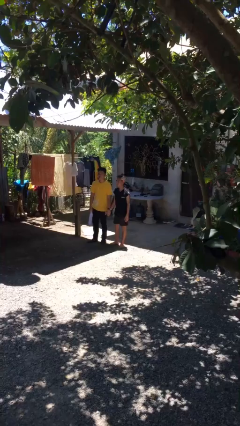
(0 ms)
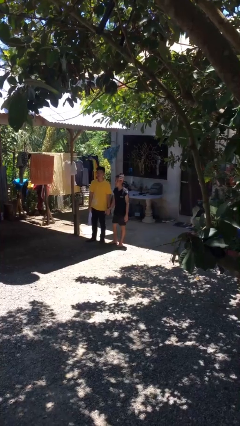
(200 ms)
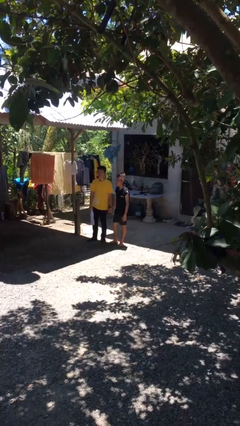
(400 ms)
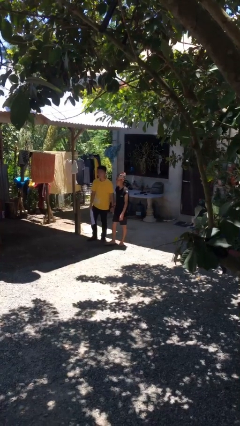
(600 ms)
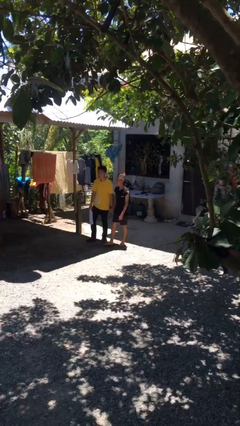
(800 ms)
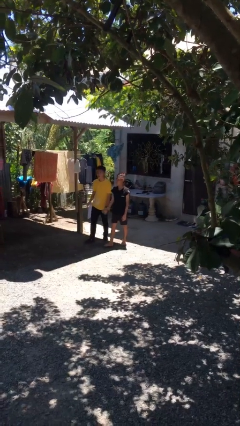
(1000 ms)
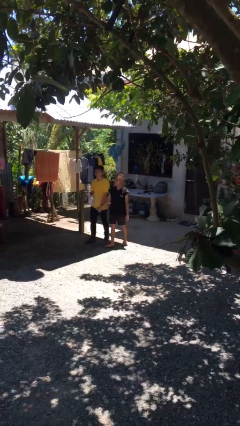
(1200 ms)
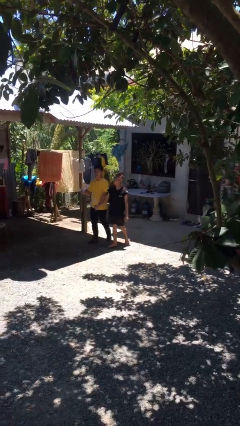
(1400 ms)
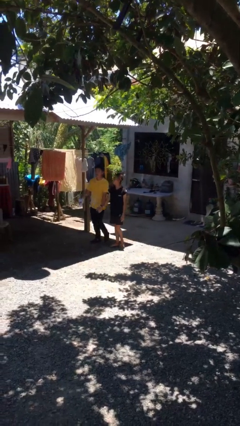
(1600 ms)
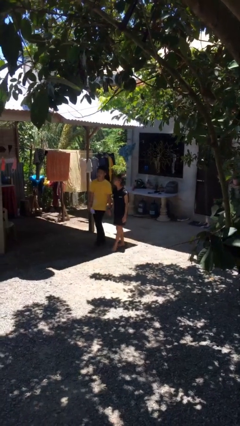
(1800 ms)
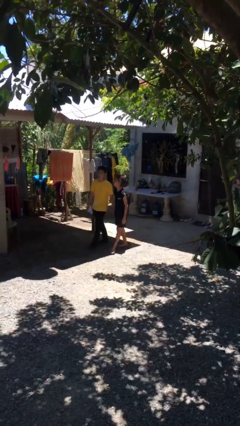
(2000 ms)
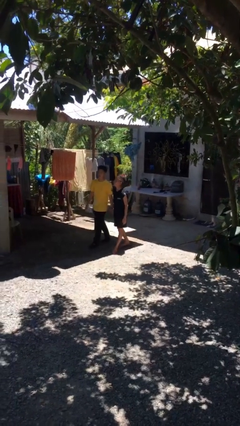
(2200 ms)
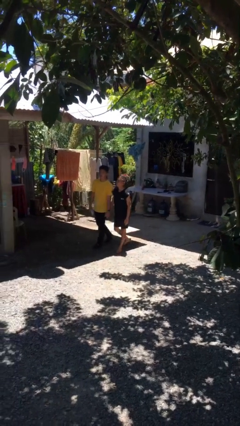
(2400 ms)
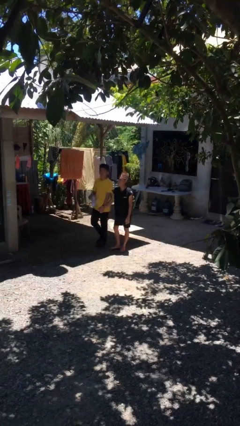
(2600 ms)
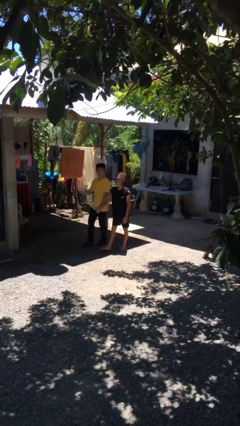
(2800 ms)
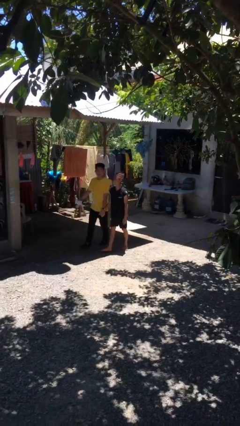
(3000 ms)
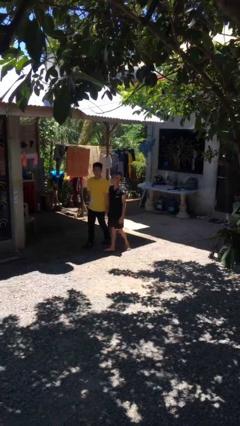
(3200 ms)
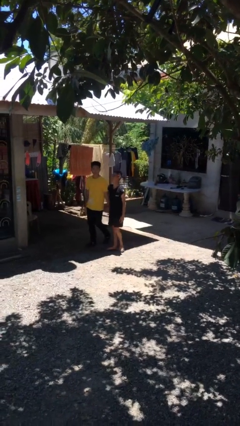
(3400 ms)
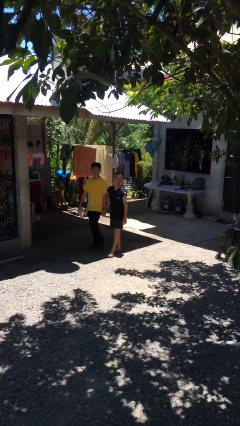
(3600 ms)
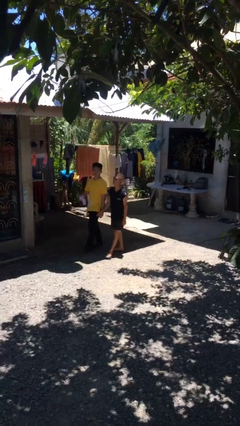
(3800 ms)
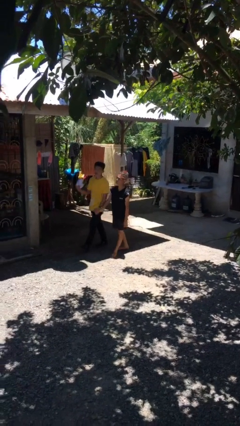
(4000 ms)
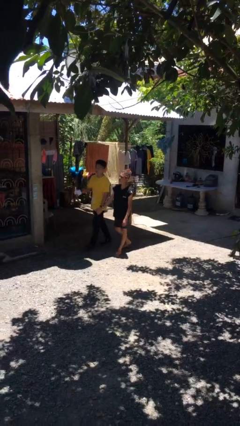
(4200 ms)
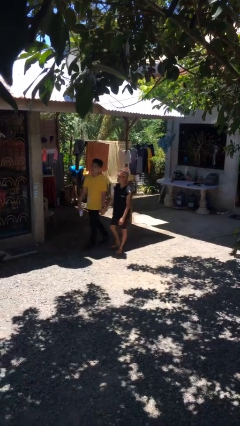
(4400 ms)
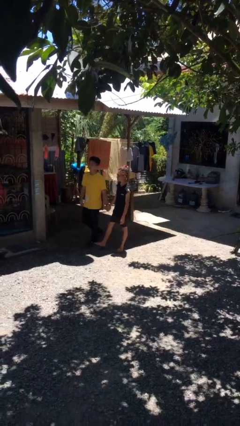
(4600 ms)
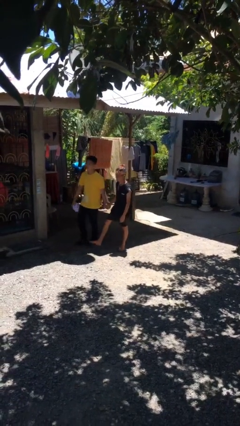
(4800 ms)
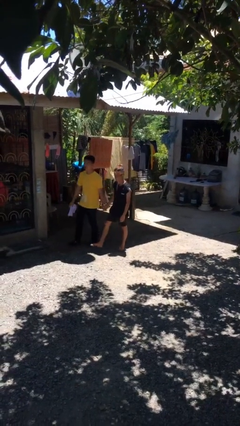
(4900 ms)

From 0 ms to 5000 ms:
person holds hand

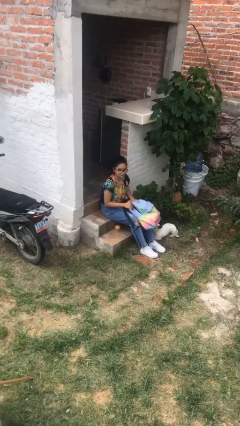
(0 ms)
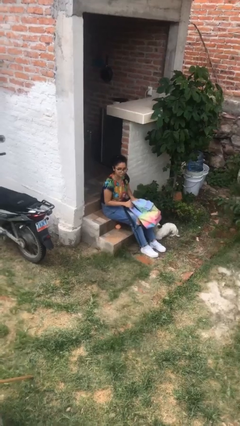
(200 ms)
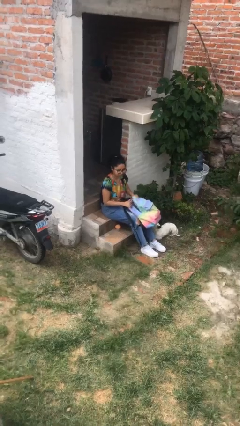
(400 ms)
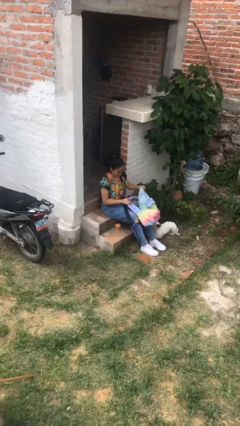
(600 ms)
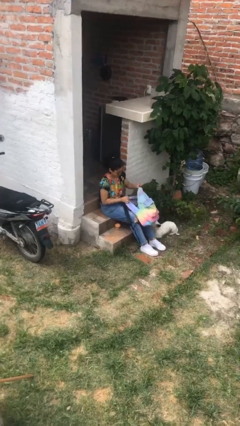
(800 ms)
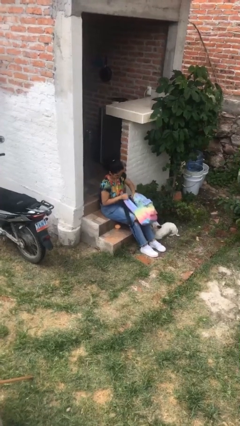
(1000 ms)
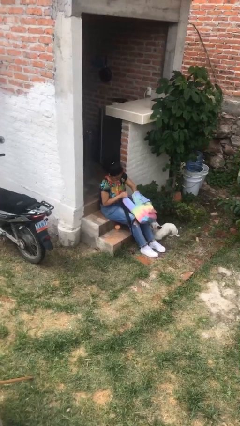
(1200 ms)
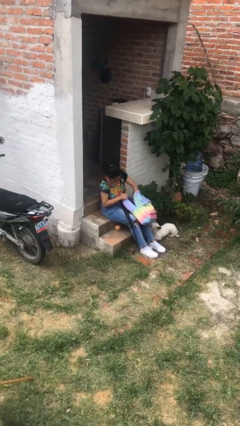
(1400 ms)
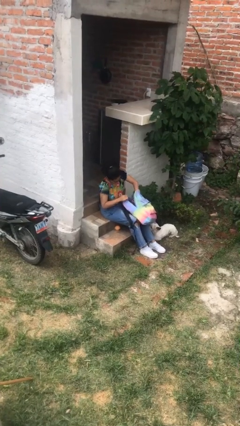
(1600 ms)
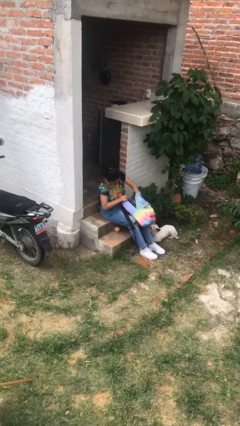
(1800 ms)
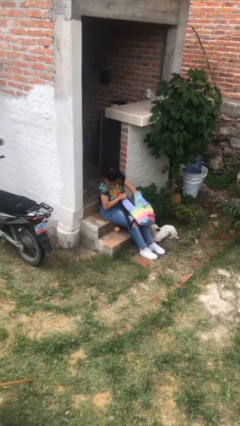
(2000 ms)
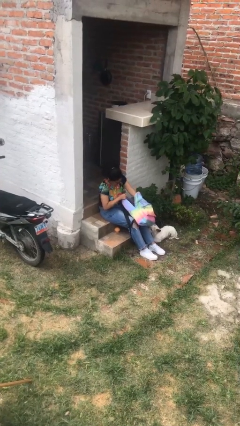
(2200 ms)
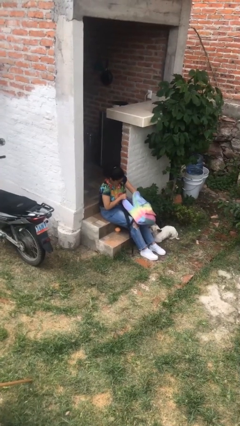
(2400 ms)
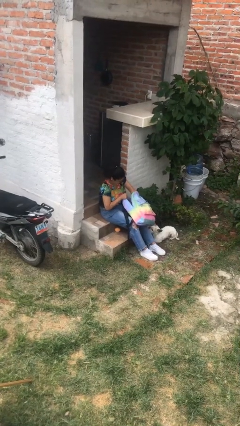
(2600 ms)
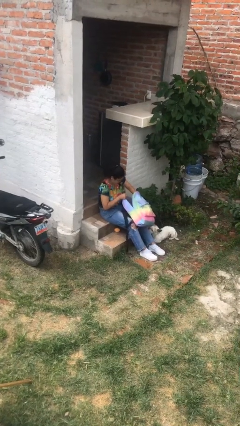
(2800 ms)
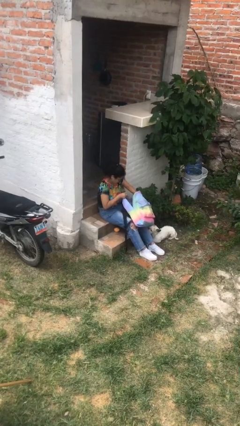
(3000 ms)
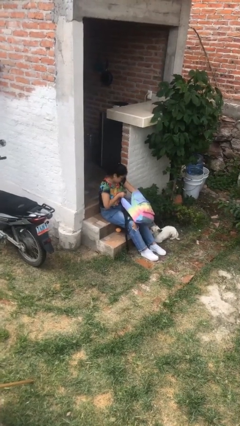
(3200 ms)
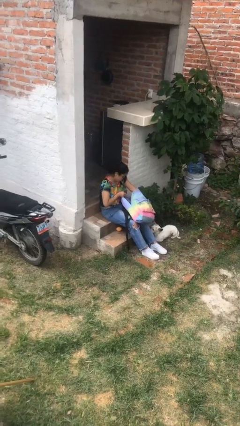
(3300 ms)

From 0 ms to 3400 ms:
person searches in backpack

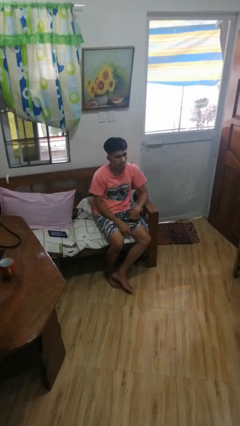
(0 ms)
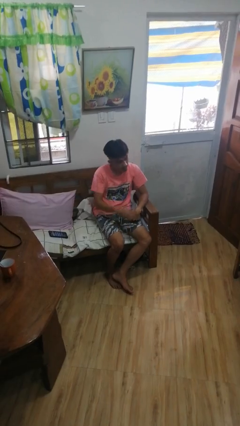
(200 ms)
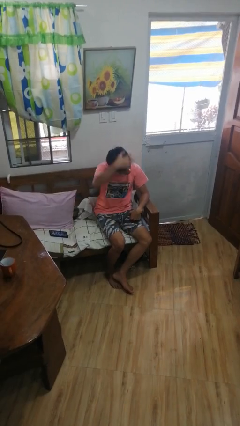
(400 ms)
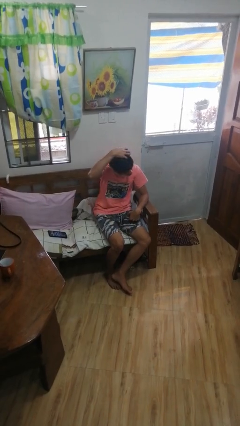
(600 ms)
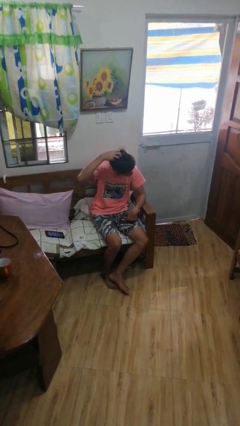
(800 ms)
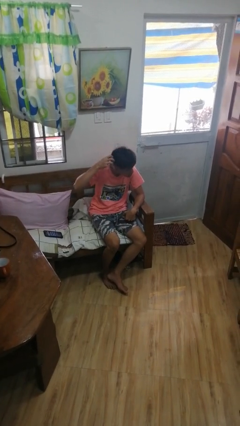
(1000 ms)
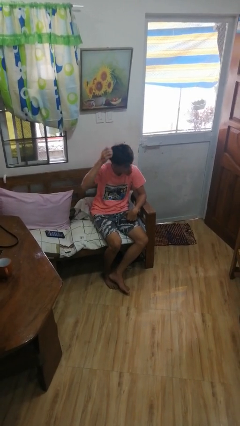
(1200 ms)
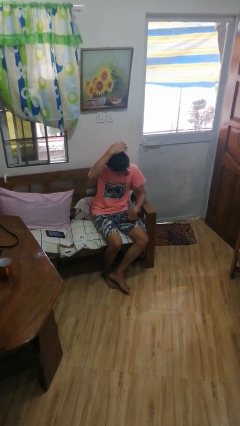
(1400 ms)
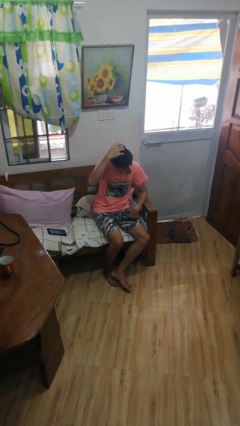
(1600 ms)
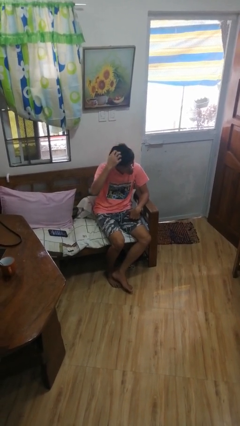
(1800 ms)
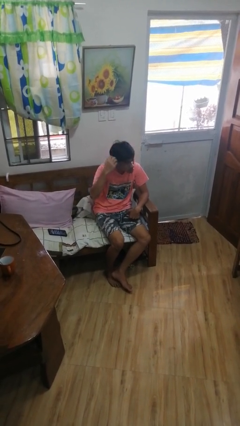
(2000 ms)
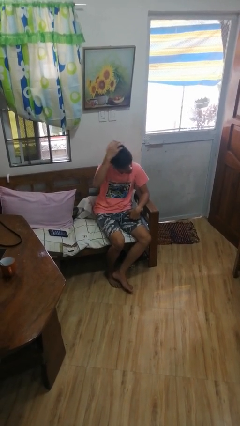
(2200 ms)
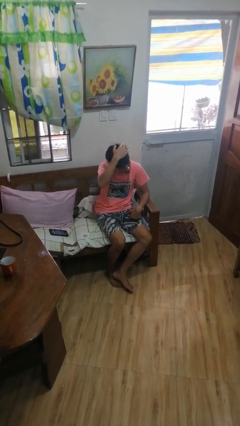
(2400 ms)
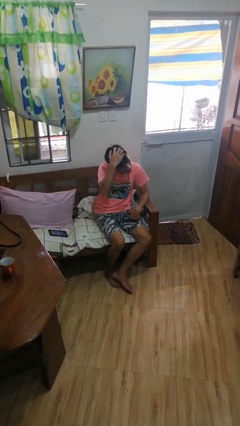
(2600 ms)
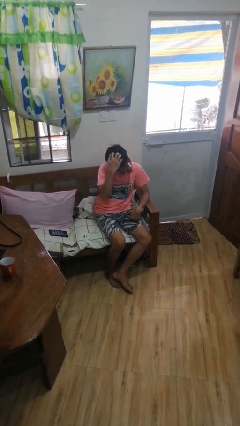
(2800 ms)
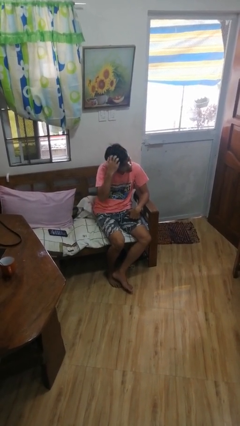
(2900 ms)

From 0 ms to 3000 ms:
person strokes hair

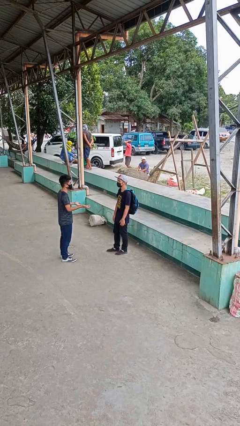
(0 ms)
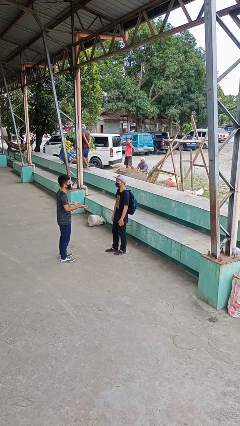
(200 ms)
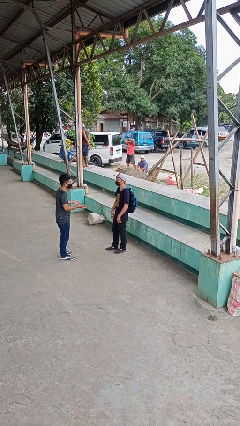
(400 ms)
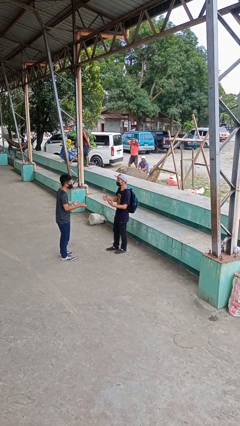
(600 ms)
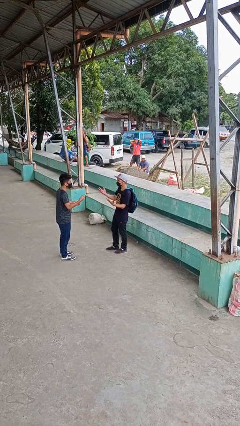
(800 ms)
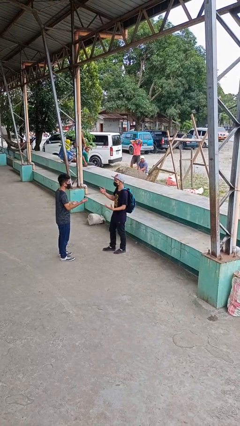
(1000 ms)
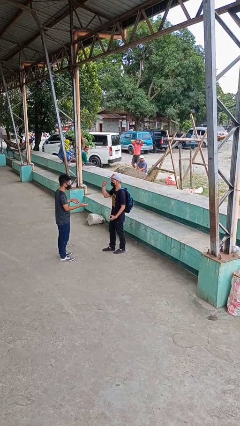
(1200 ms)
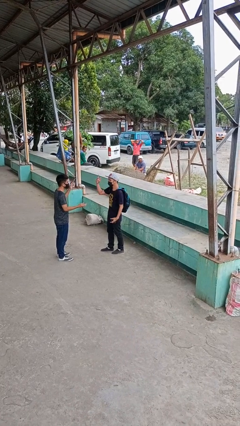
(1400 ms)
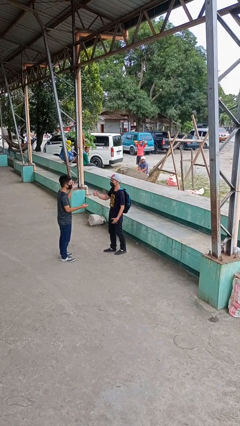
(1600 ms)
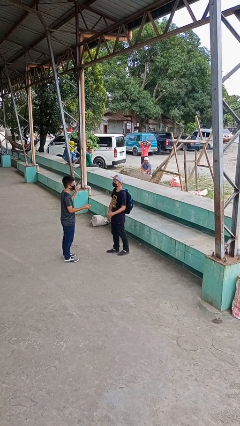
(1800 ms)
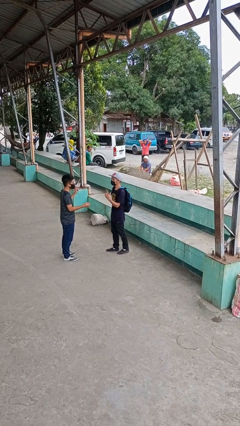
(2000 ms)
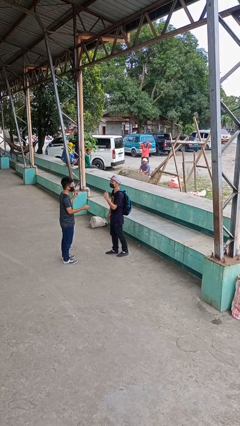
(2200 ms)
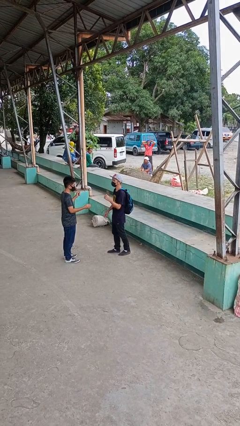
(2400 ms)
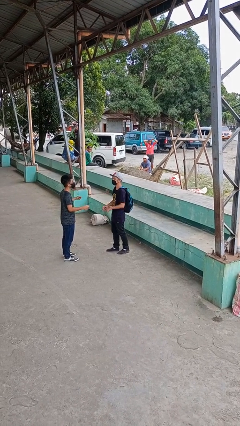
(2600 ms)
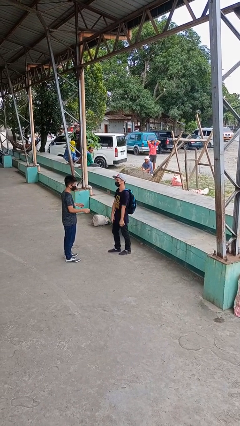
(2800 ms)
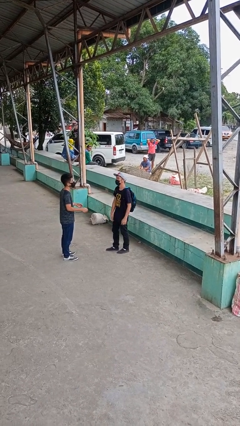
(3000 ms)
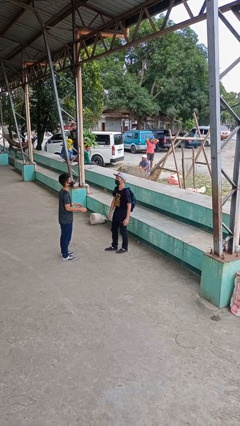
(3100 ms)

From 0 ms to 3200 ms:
person talks to person

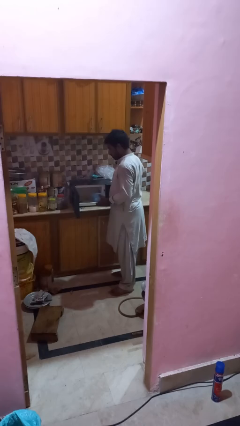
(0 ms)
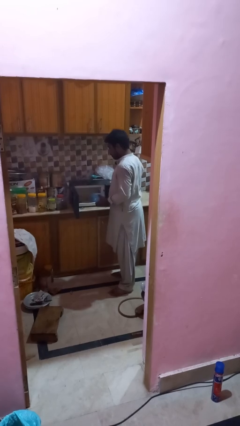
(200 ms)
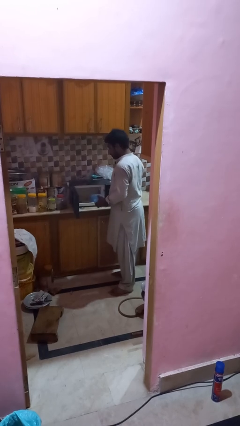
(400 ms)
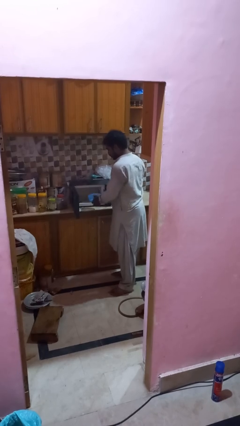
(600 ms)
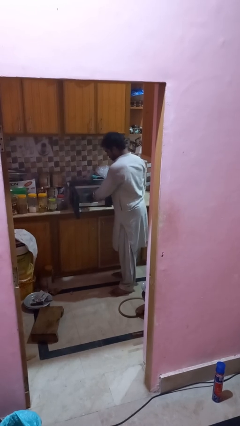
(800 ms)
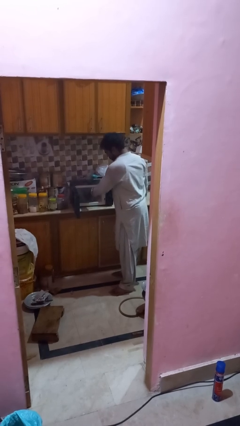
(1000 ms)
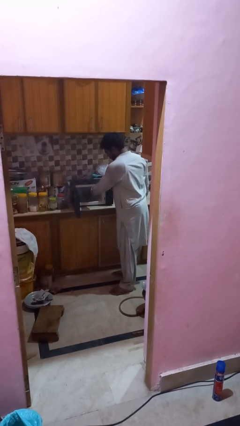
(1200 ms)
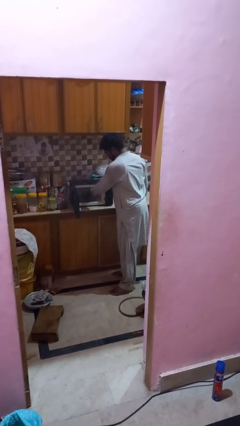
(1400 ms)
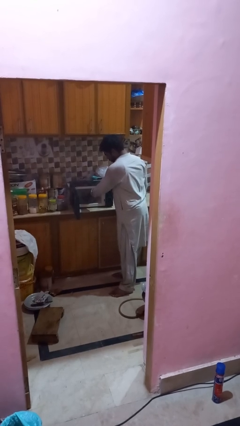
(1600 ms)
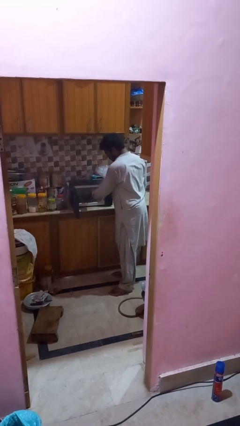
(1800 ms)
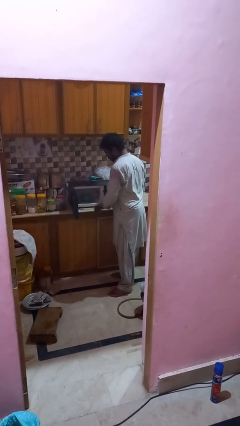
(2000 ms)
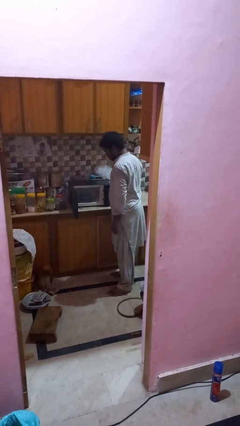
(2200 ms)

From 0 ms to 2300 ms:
person puts object into microwave

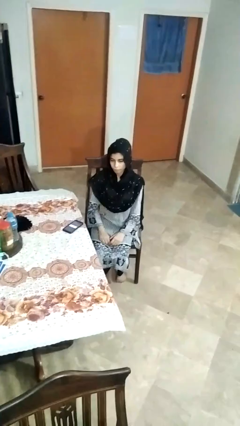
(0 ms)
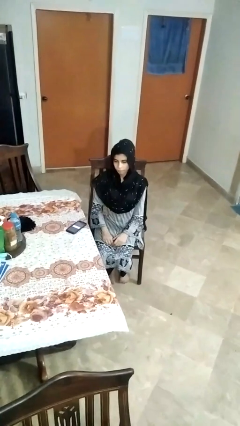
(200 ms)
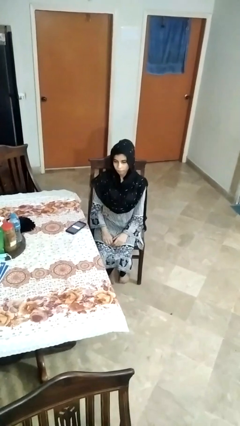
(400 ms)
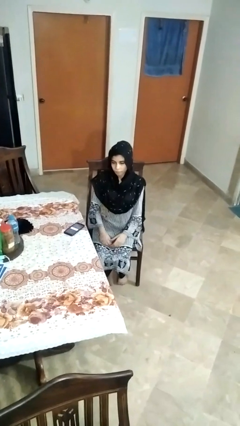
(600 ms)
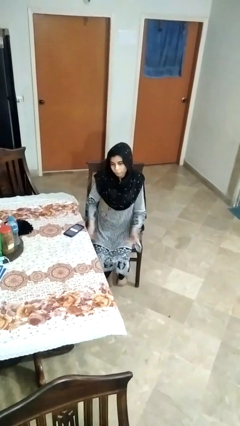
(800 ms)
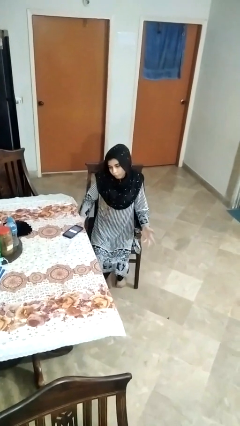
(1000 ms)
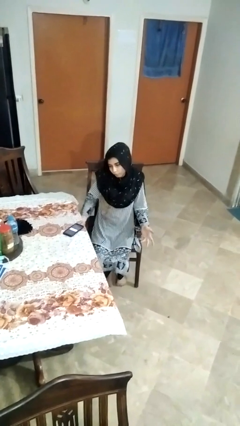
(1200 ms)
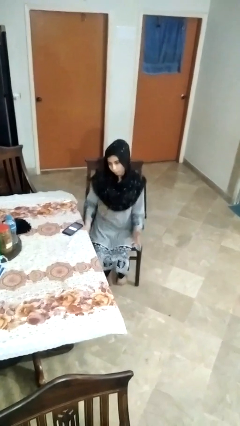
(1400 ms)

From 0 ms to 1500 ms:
person shrugs
